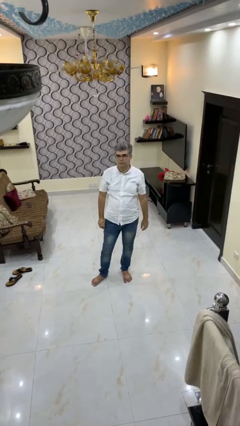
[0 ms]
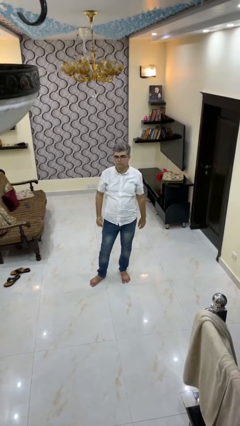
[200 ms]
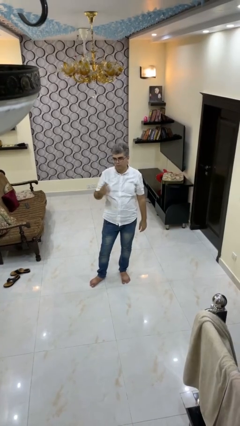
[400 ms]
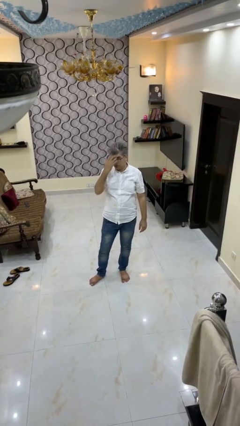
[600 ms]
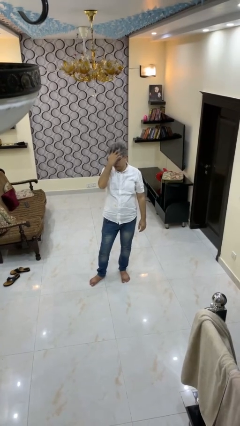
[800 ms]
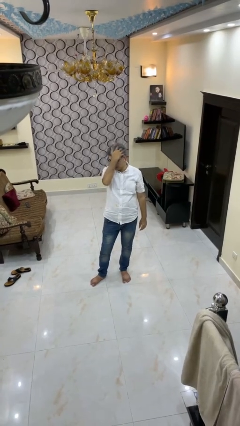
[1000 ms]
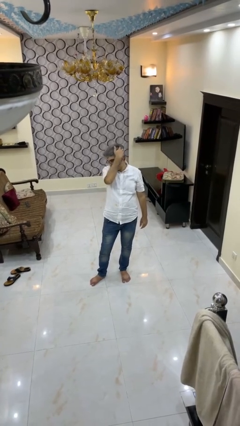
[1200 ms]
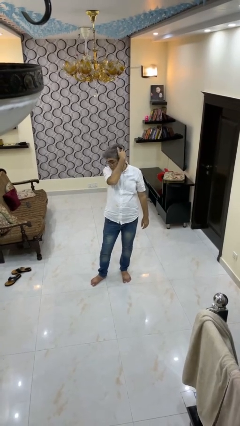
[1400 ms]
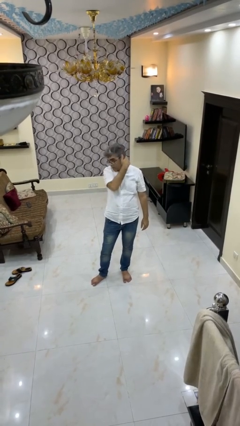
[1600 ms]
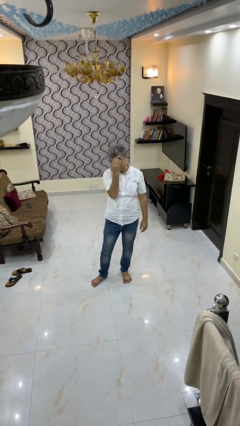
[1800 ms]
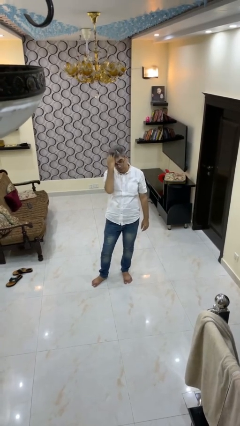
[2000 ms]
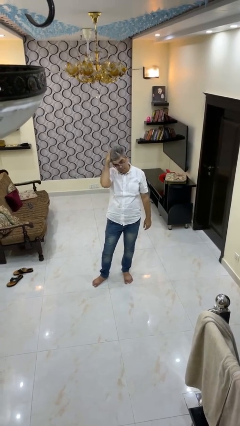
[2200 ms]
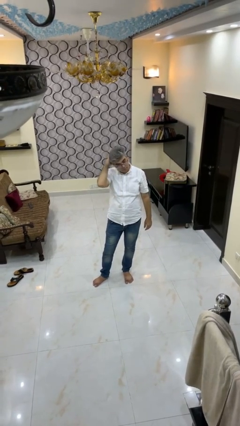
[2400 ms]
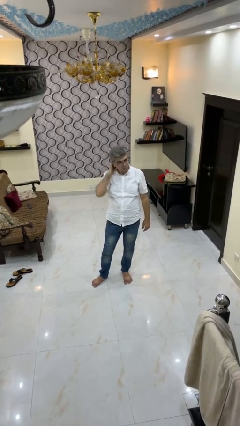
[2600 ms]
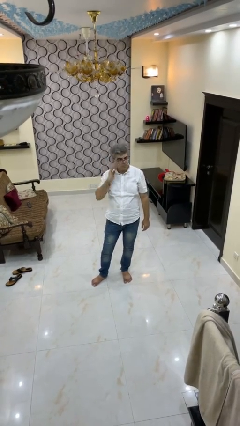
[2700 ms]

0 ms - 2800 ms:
person strokes hair

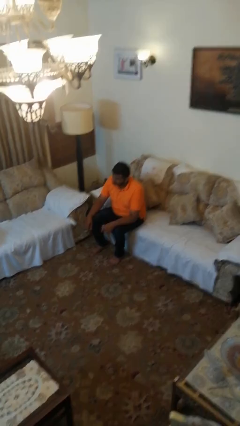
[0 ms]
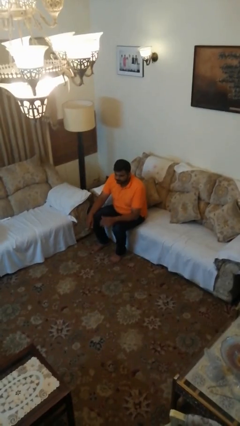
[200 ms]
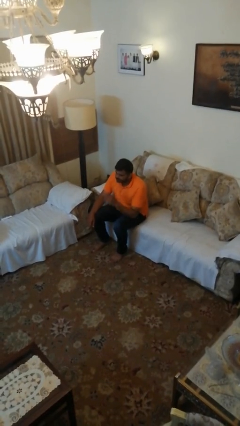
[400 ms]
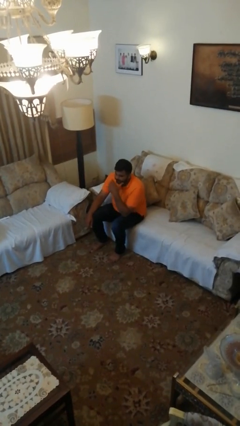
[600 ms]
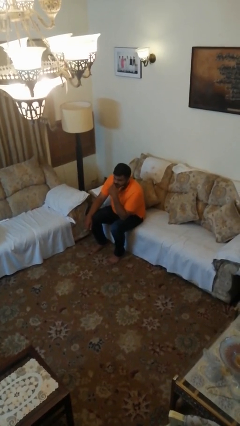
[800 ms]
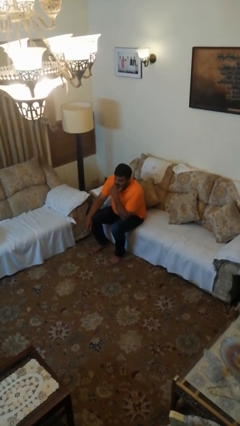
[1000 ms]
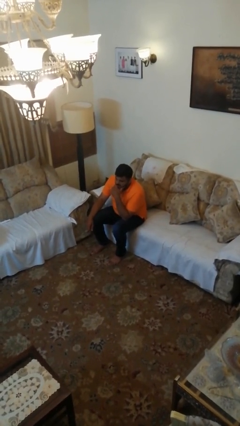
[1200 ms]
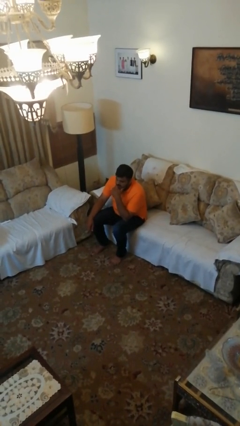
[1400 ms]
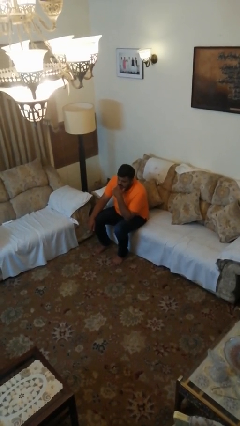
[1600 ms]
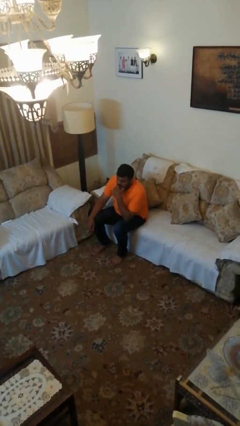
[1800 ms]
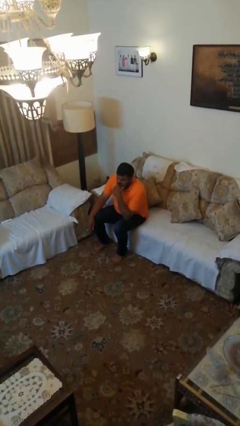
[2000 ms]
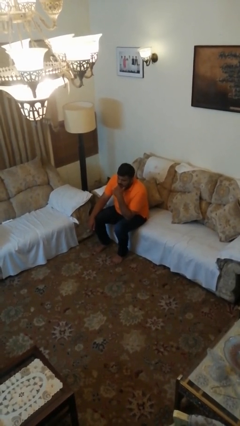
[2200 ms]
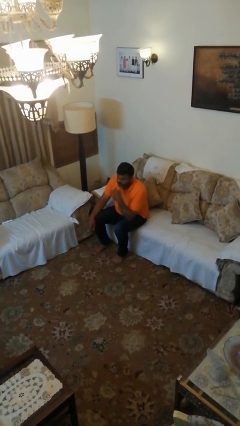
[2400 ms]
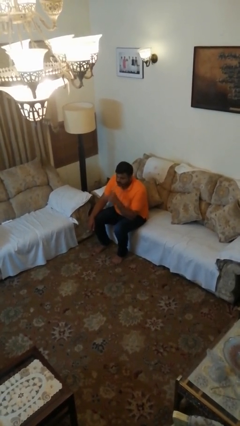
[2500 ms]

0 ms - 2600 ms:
person strokes chin

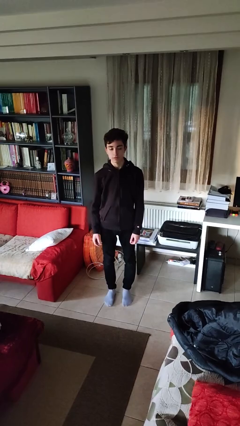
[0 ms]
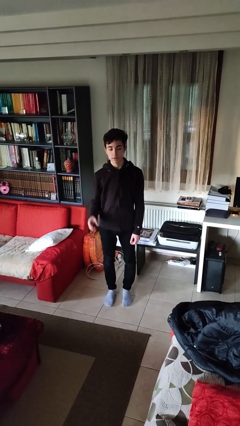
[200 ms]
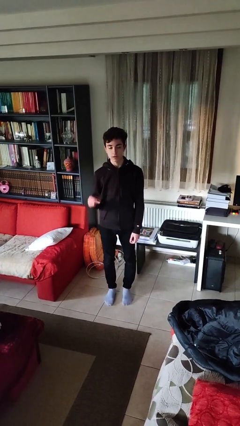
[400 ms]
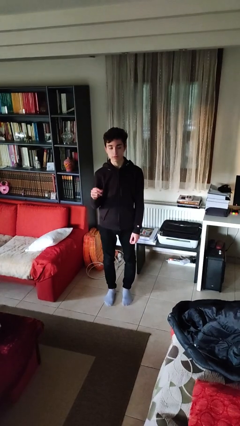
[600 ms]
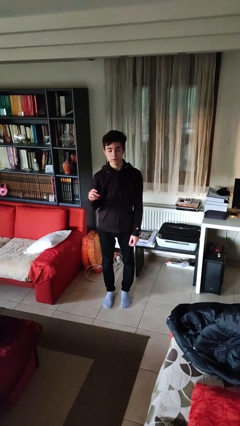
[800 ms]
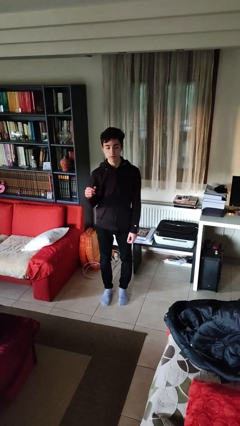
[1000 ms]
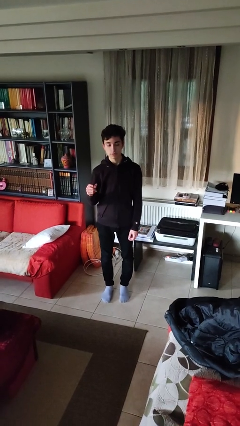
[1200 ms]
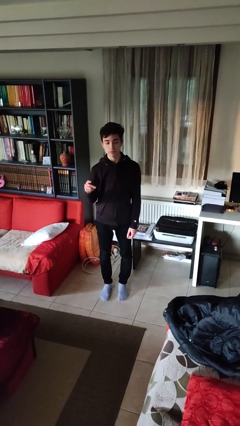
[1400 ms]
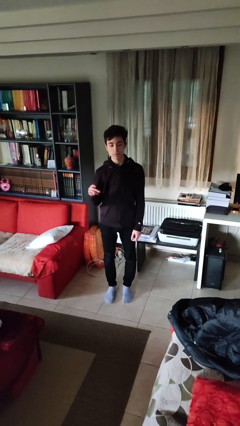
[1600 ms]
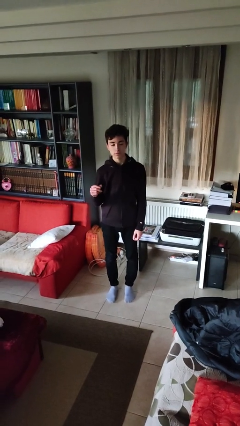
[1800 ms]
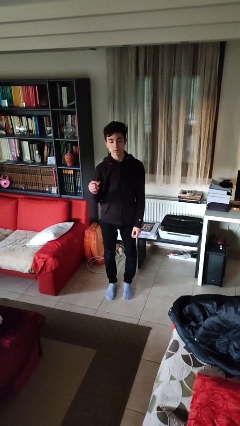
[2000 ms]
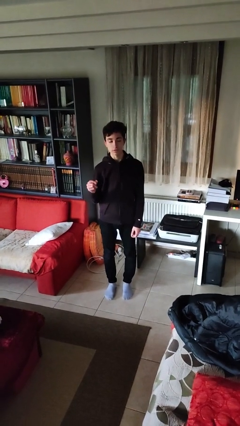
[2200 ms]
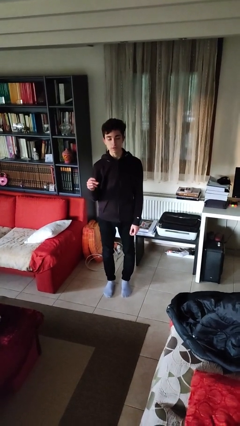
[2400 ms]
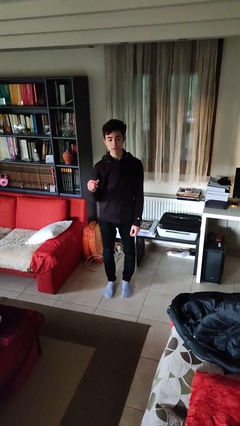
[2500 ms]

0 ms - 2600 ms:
person snaps fingers

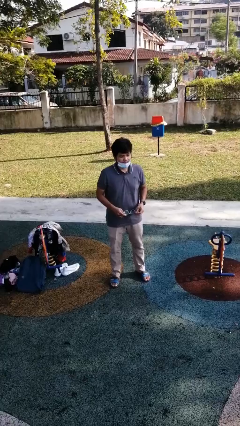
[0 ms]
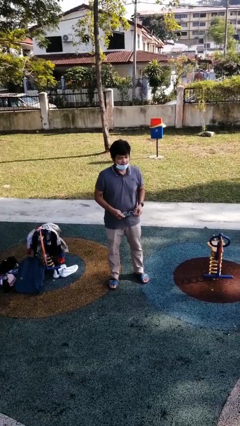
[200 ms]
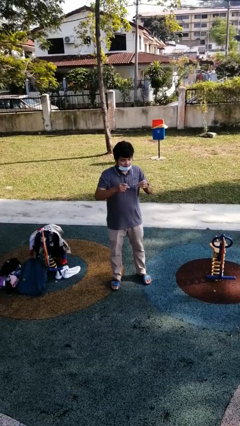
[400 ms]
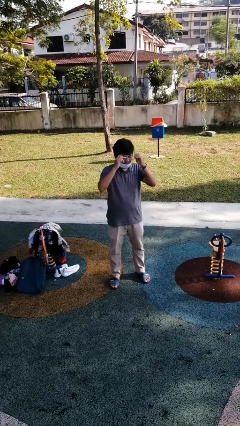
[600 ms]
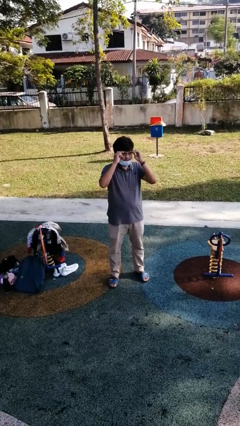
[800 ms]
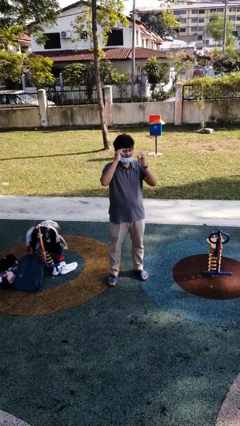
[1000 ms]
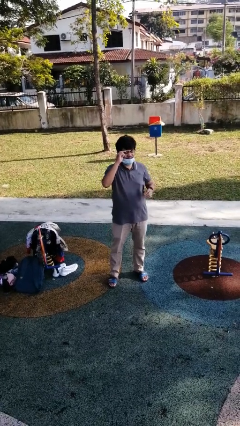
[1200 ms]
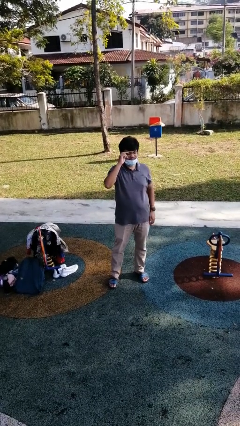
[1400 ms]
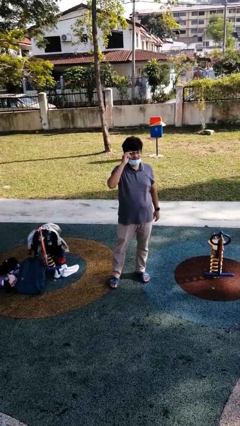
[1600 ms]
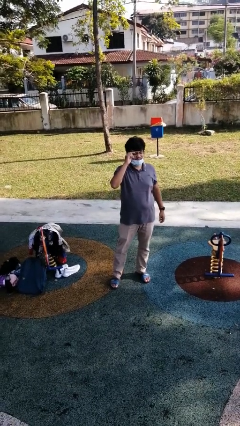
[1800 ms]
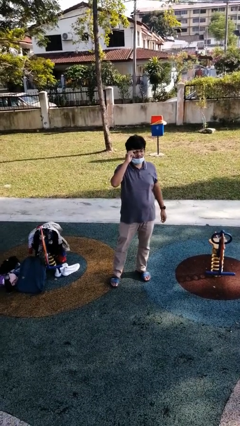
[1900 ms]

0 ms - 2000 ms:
person puts on glasses

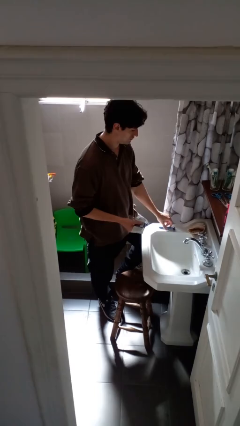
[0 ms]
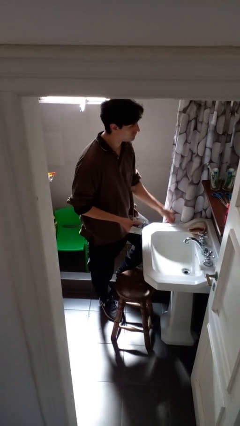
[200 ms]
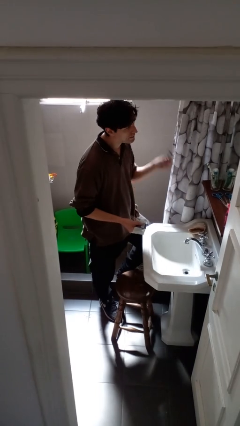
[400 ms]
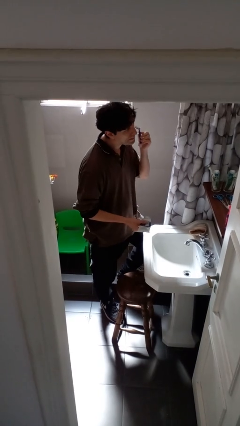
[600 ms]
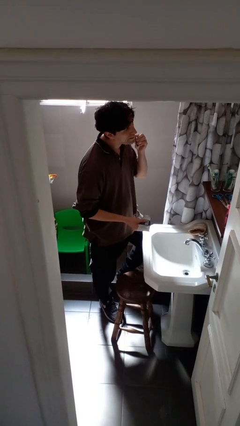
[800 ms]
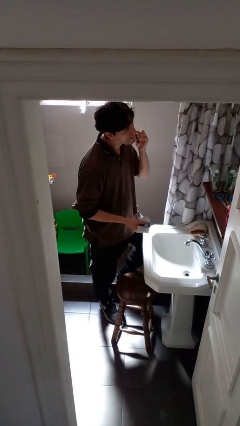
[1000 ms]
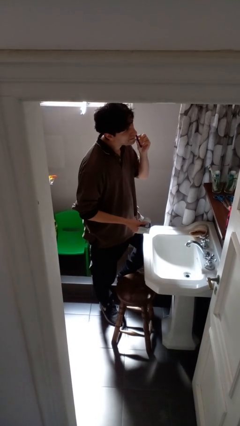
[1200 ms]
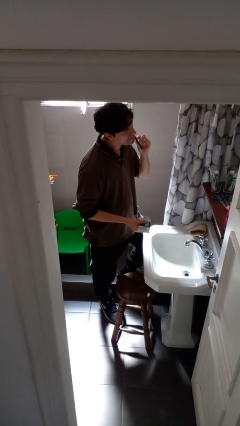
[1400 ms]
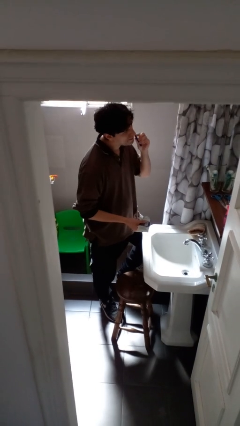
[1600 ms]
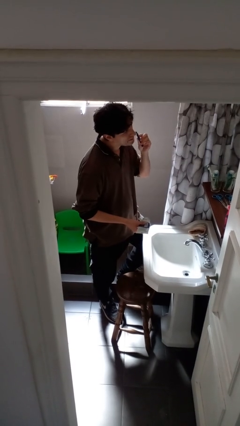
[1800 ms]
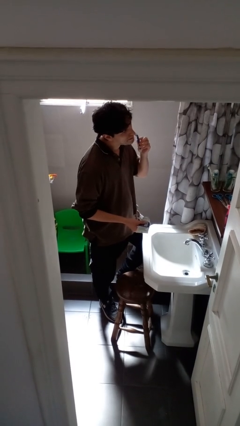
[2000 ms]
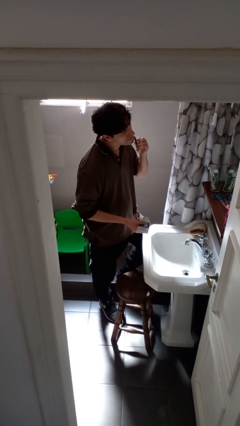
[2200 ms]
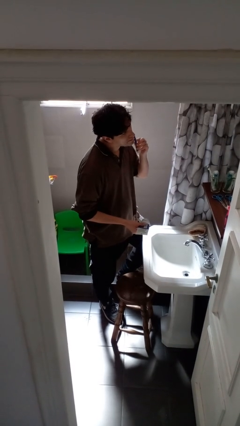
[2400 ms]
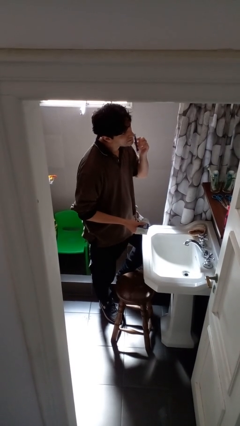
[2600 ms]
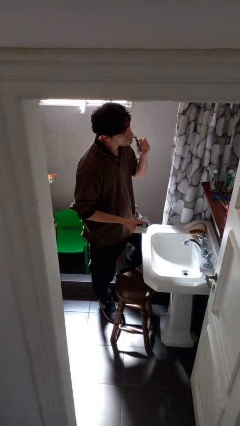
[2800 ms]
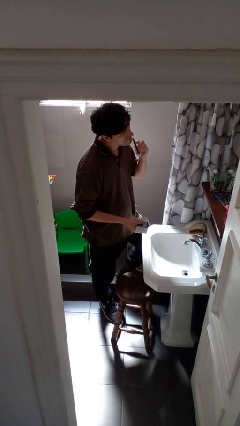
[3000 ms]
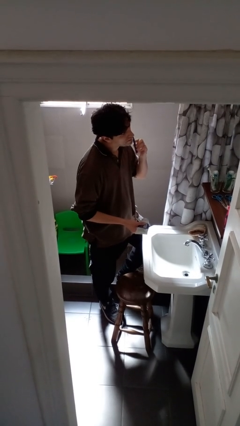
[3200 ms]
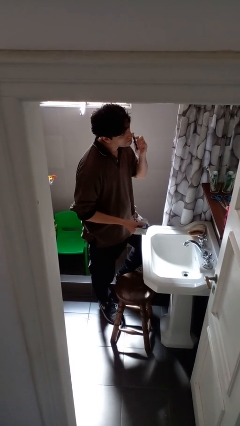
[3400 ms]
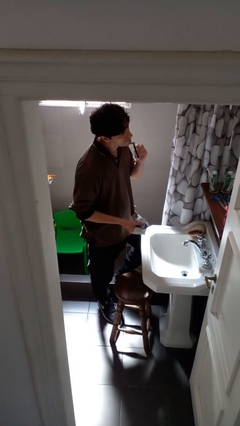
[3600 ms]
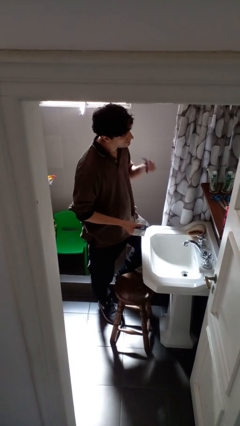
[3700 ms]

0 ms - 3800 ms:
person shaves face

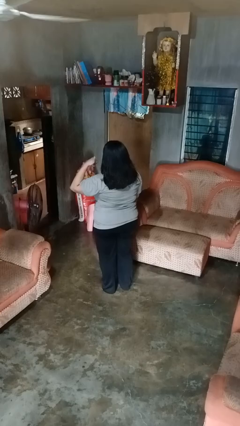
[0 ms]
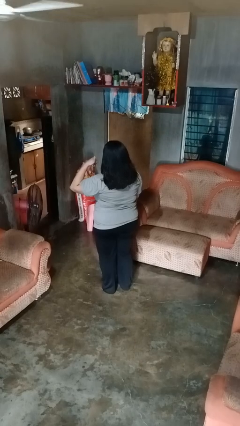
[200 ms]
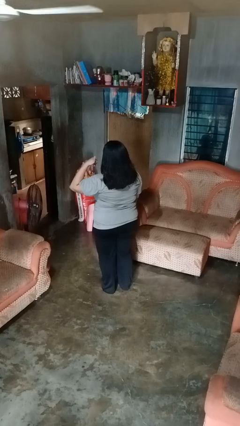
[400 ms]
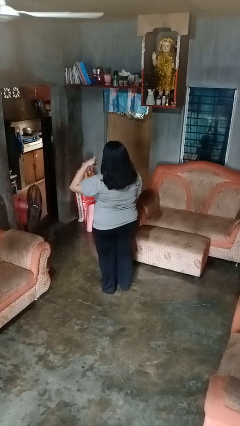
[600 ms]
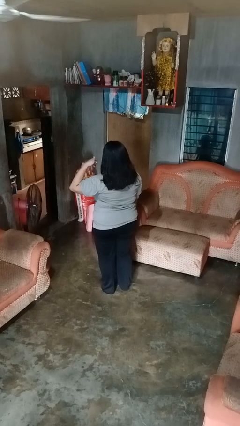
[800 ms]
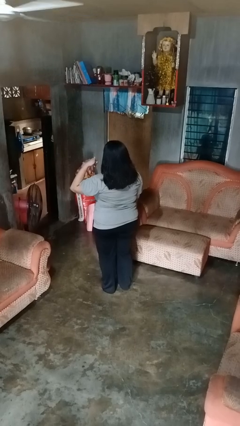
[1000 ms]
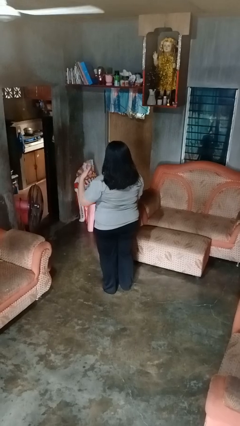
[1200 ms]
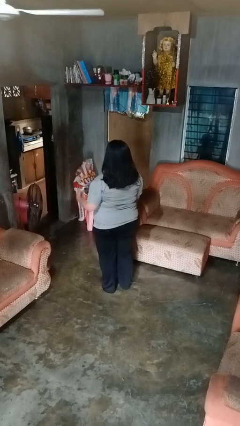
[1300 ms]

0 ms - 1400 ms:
person gestures call me

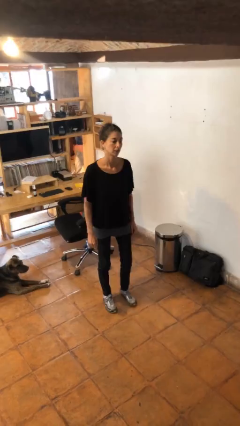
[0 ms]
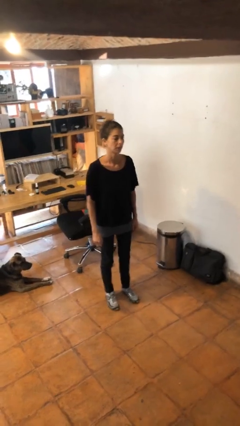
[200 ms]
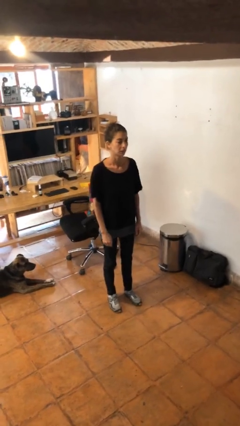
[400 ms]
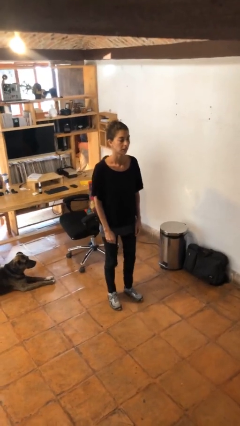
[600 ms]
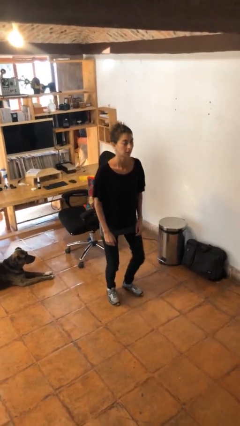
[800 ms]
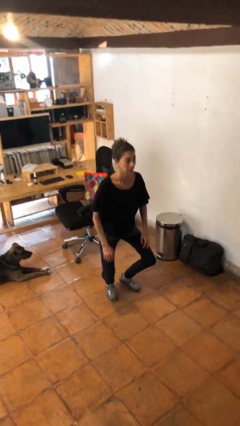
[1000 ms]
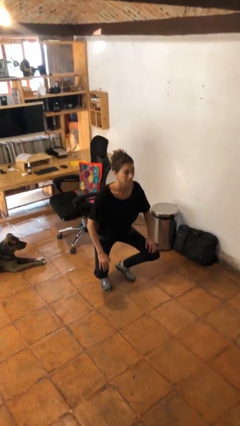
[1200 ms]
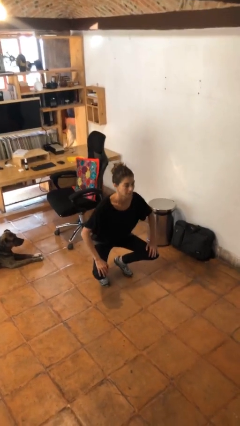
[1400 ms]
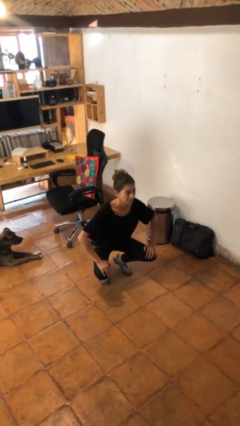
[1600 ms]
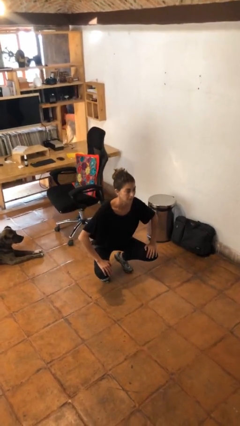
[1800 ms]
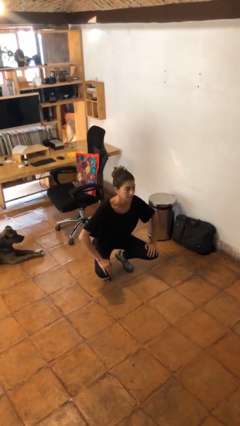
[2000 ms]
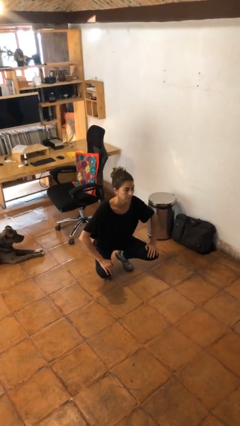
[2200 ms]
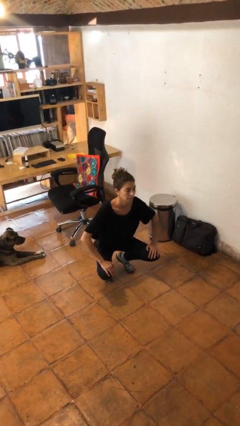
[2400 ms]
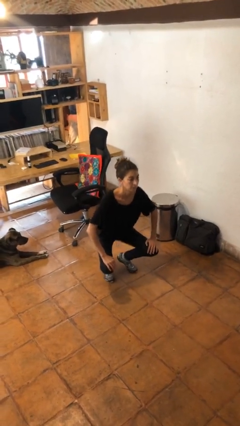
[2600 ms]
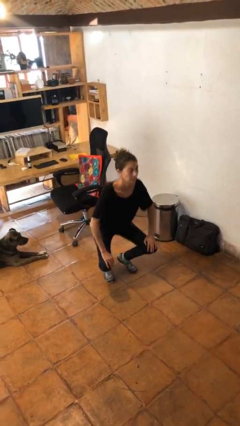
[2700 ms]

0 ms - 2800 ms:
person squats
